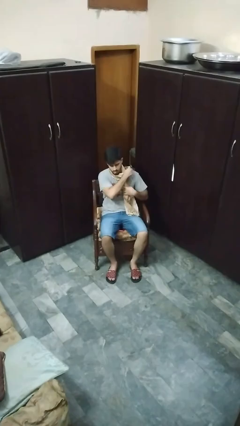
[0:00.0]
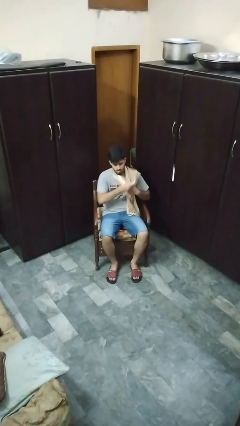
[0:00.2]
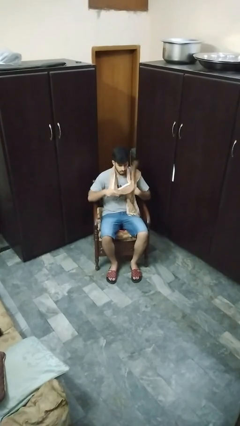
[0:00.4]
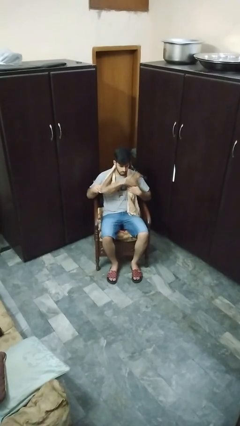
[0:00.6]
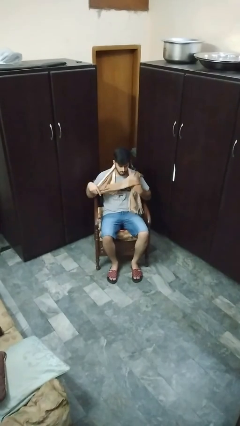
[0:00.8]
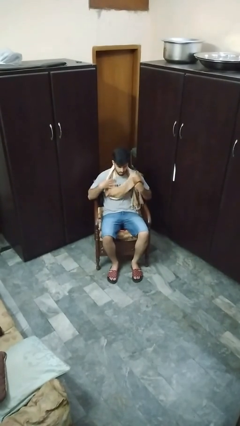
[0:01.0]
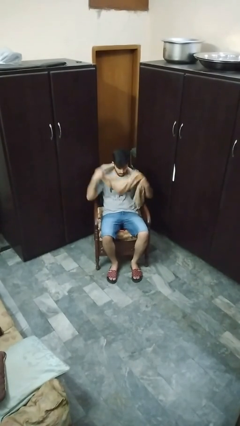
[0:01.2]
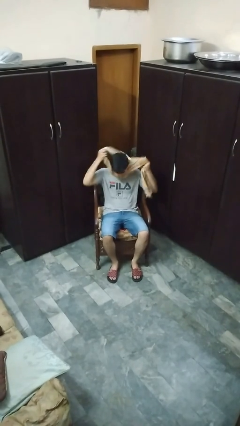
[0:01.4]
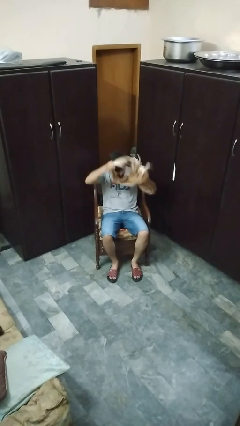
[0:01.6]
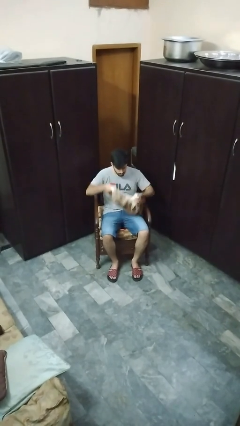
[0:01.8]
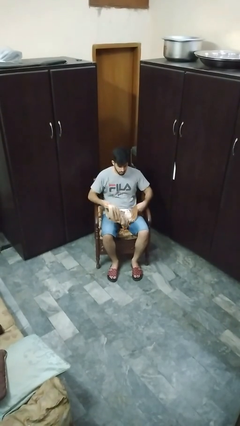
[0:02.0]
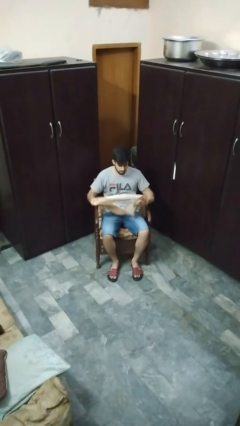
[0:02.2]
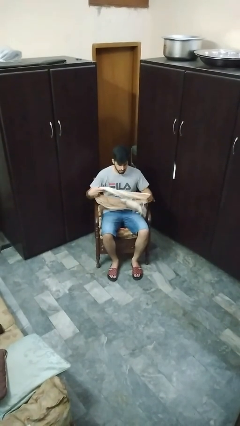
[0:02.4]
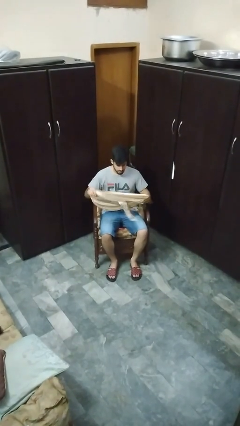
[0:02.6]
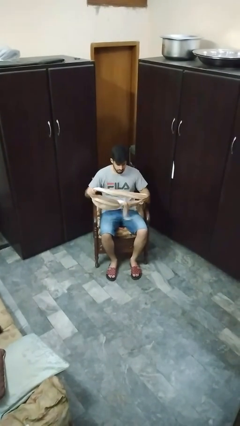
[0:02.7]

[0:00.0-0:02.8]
person takes off scarf

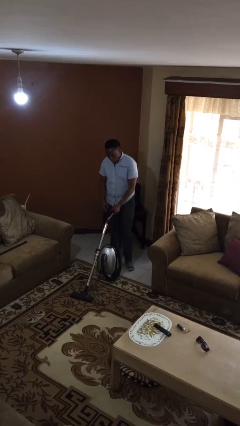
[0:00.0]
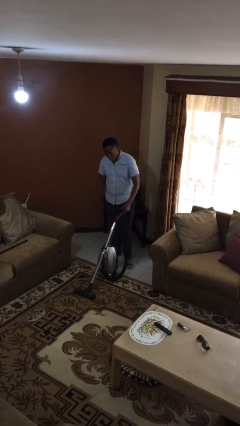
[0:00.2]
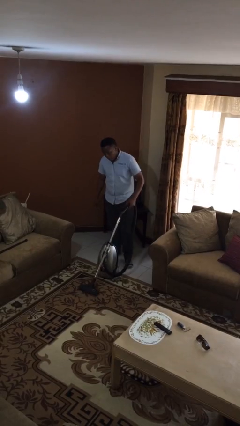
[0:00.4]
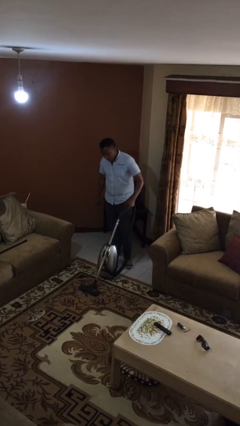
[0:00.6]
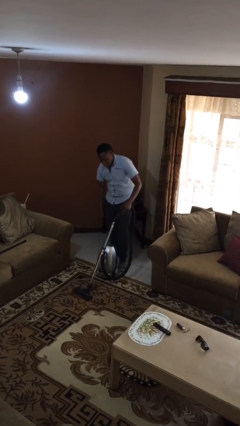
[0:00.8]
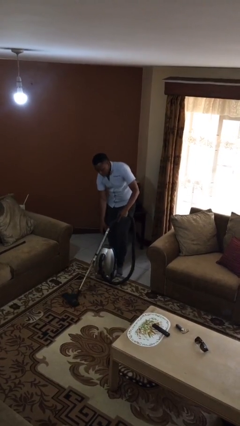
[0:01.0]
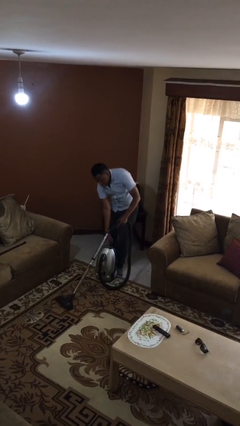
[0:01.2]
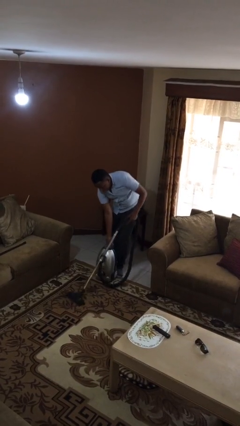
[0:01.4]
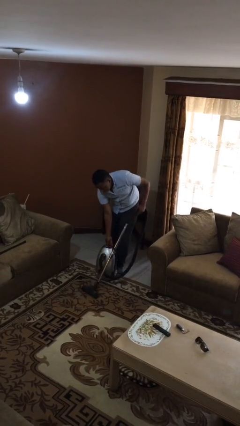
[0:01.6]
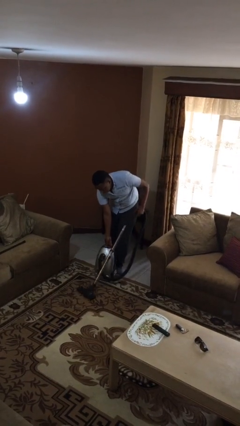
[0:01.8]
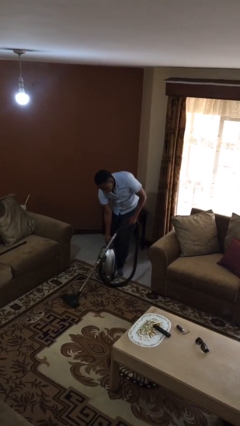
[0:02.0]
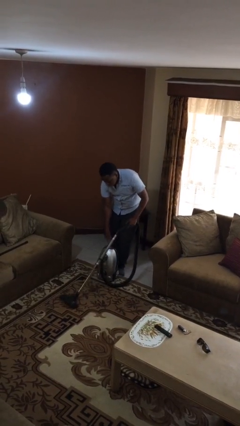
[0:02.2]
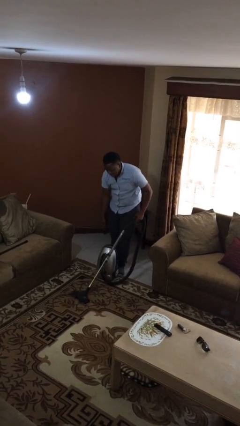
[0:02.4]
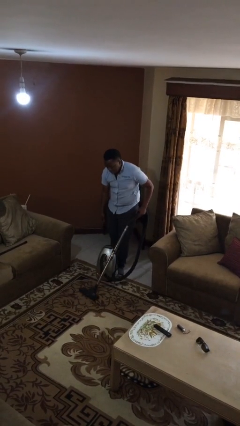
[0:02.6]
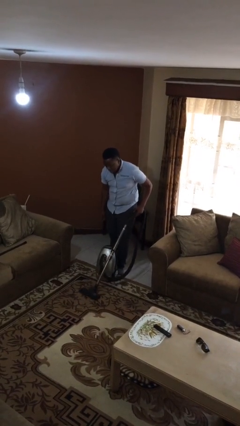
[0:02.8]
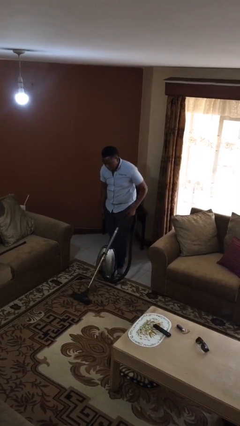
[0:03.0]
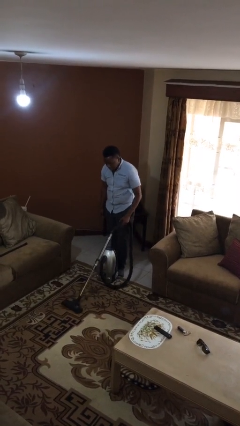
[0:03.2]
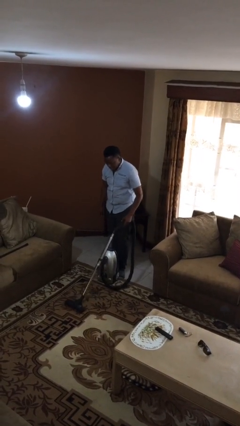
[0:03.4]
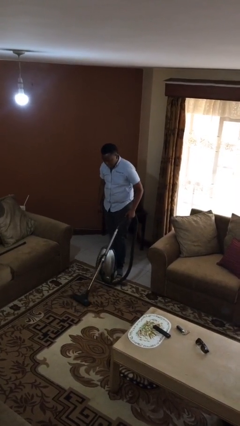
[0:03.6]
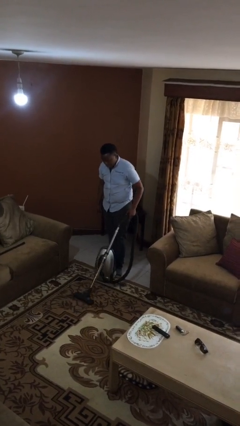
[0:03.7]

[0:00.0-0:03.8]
person vacuums carpet

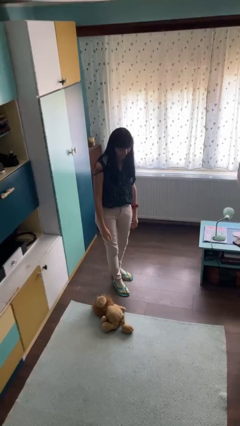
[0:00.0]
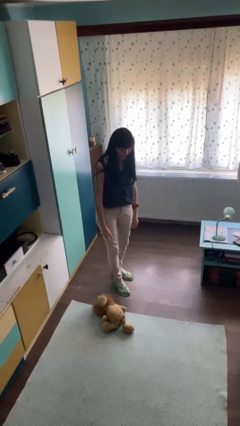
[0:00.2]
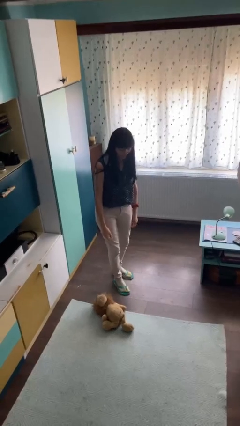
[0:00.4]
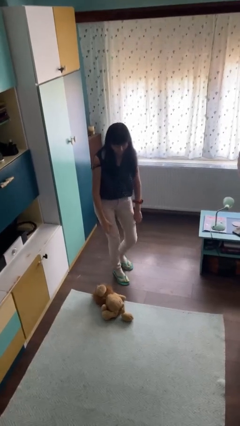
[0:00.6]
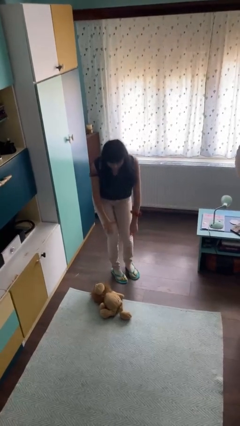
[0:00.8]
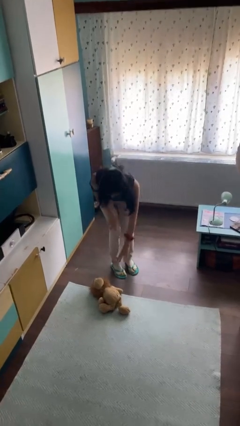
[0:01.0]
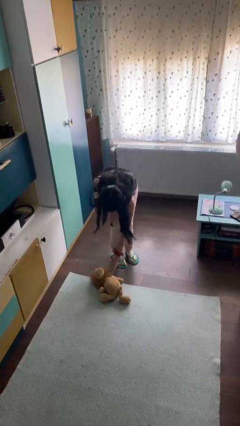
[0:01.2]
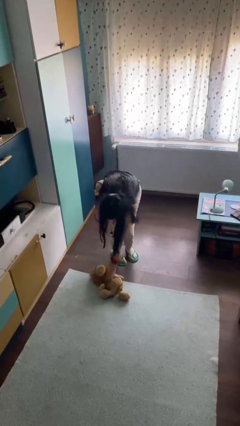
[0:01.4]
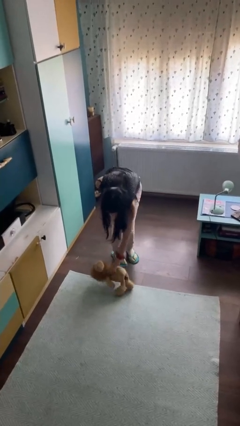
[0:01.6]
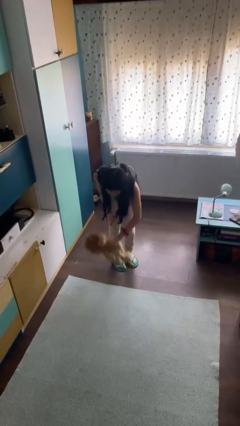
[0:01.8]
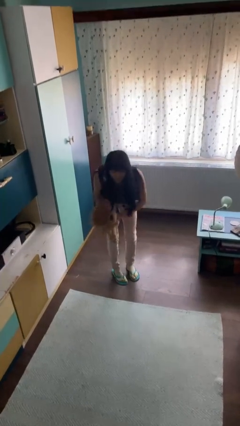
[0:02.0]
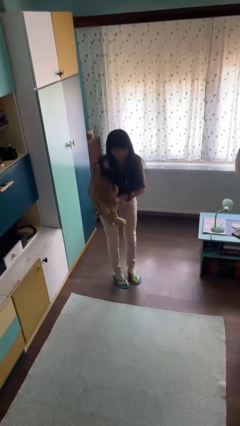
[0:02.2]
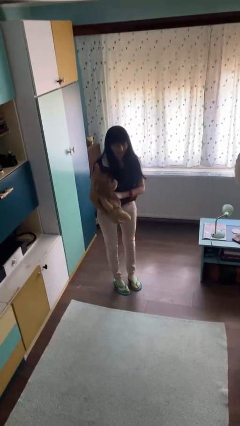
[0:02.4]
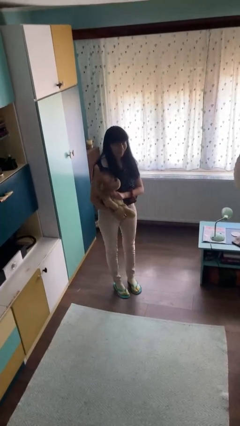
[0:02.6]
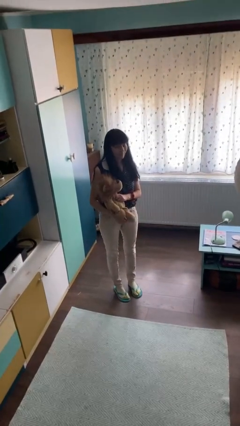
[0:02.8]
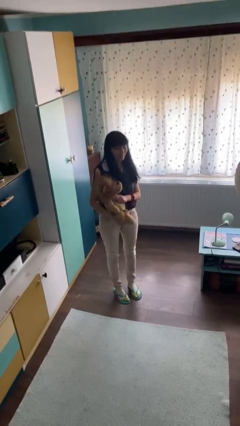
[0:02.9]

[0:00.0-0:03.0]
person picks up object from floor

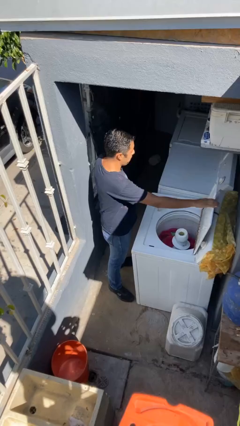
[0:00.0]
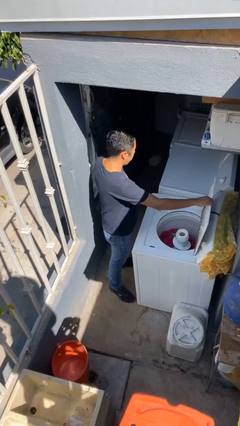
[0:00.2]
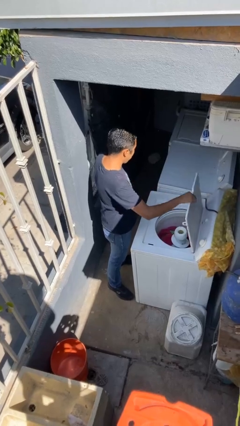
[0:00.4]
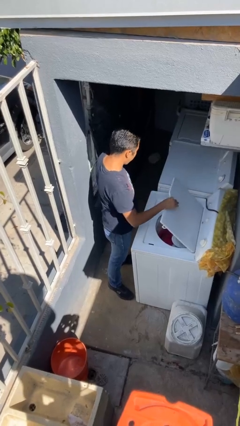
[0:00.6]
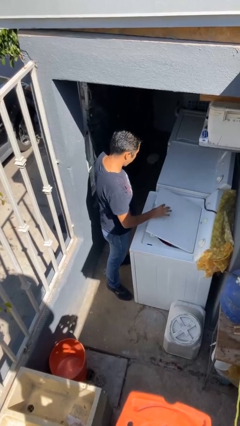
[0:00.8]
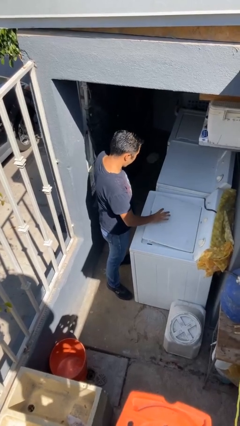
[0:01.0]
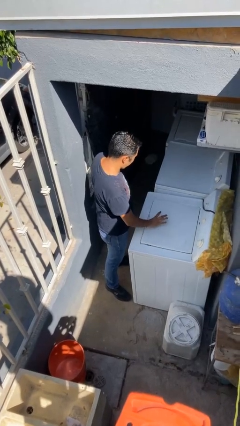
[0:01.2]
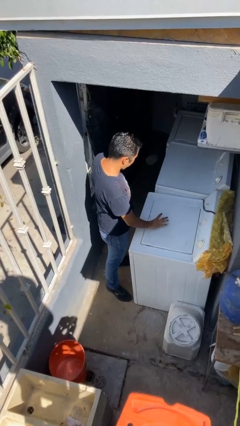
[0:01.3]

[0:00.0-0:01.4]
person closes clothes washer

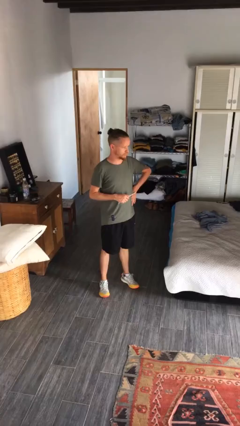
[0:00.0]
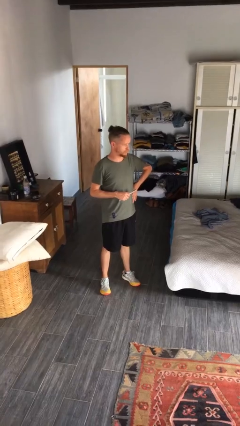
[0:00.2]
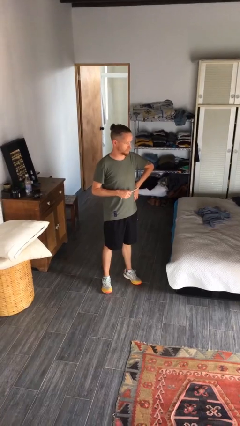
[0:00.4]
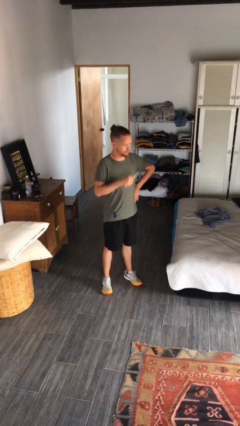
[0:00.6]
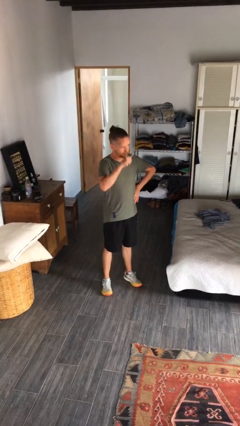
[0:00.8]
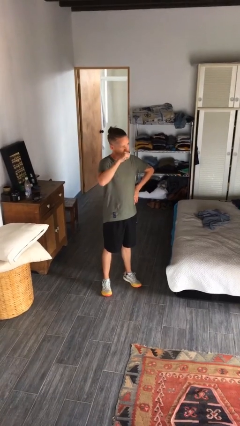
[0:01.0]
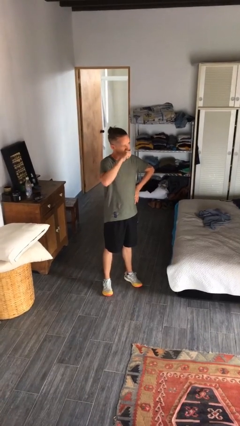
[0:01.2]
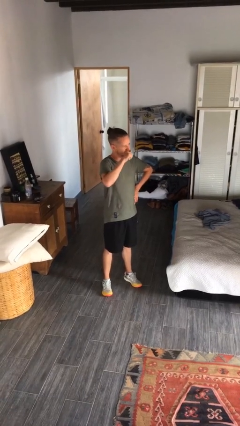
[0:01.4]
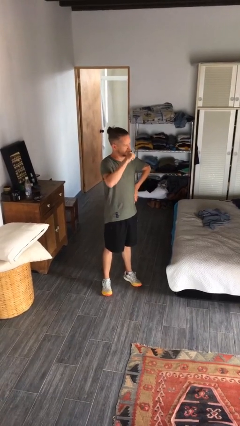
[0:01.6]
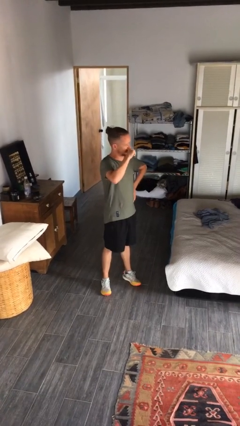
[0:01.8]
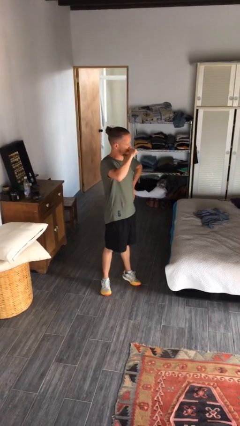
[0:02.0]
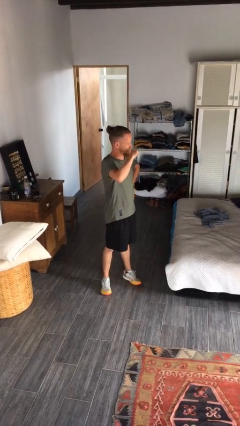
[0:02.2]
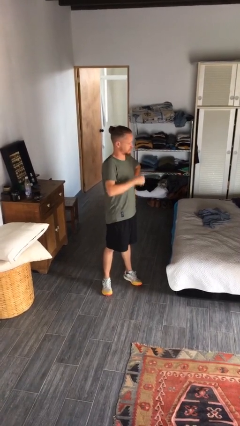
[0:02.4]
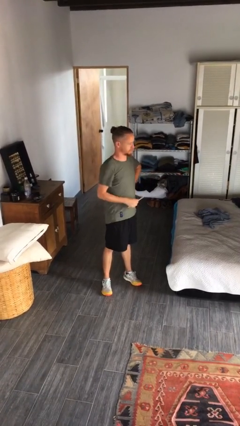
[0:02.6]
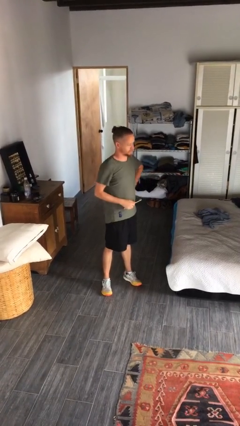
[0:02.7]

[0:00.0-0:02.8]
person brushes teeth

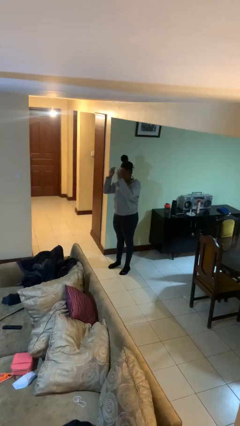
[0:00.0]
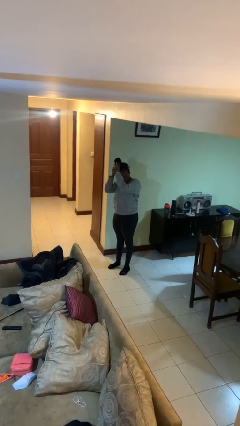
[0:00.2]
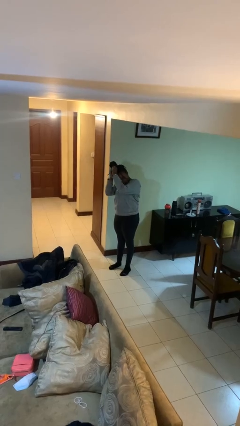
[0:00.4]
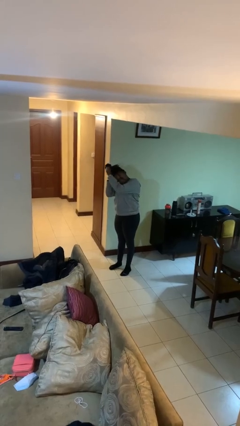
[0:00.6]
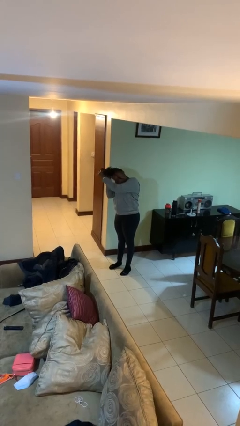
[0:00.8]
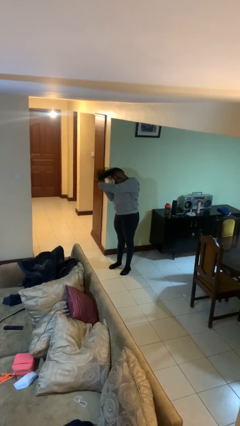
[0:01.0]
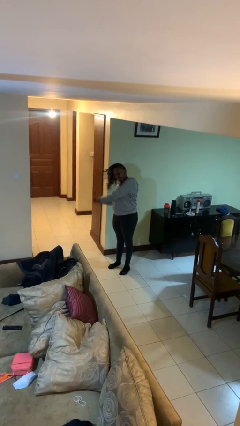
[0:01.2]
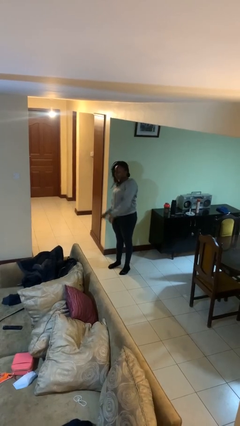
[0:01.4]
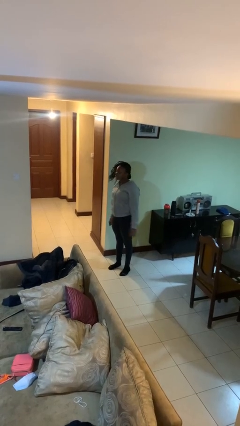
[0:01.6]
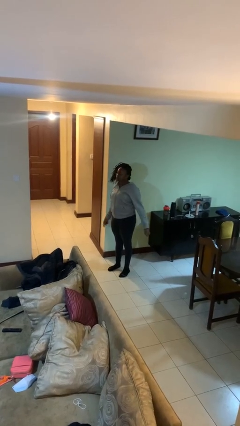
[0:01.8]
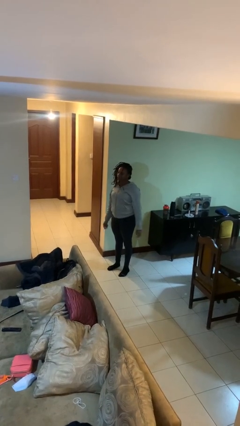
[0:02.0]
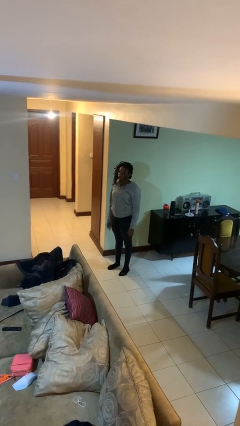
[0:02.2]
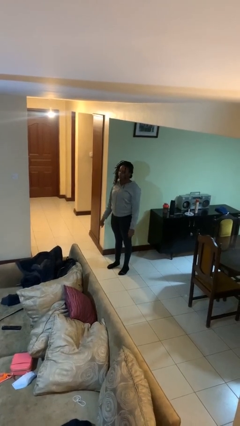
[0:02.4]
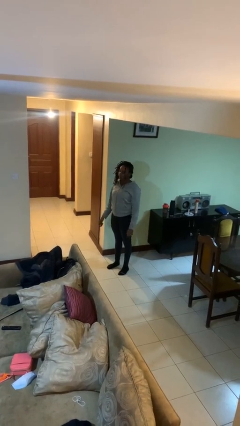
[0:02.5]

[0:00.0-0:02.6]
person takes off hairtie

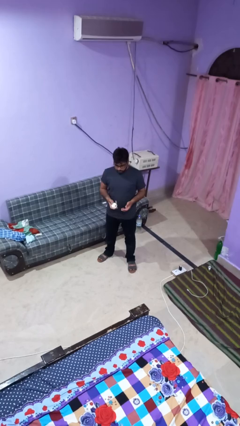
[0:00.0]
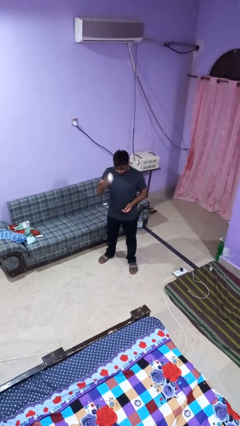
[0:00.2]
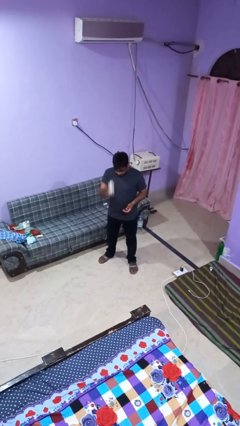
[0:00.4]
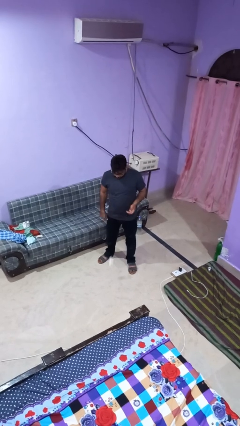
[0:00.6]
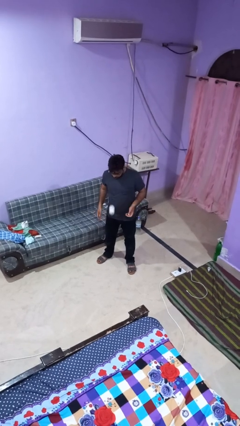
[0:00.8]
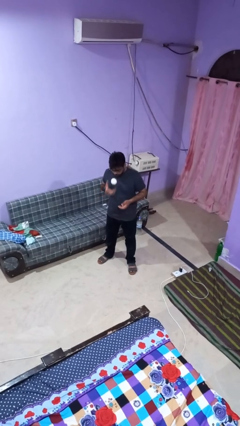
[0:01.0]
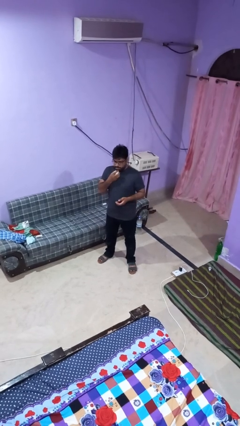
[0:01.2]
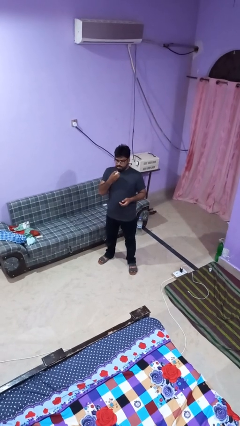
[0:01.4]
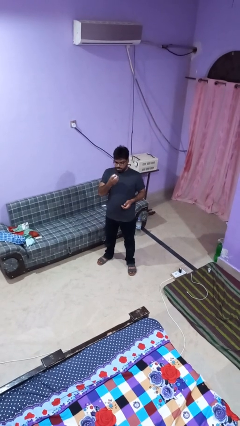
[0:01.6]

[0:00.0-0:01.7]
person bounces ball on floor
